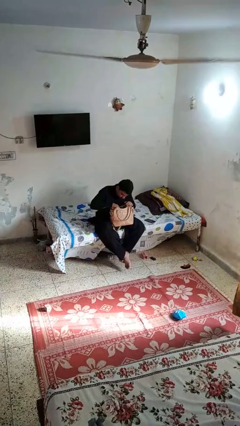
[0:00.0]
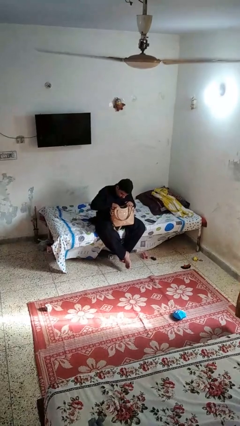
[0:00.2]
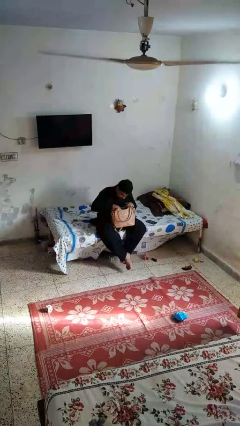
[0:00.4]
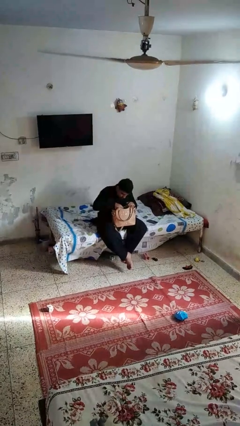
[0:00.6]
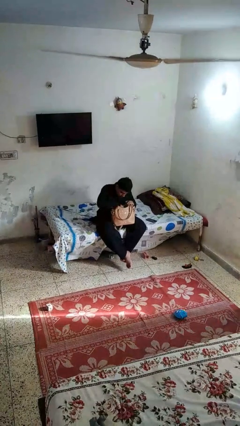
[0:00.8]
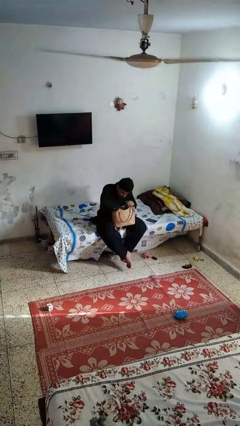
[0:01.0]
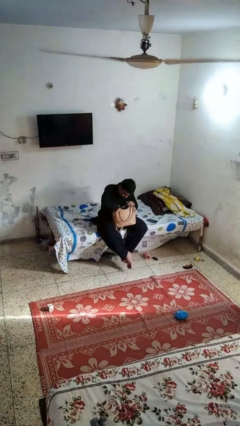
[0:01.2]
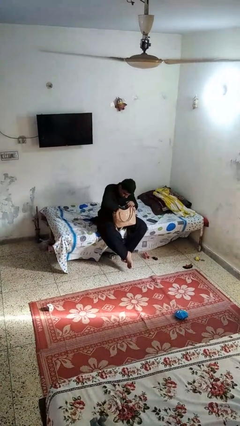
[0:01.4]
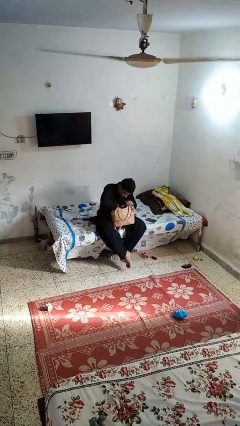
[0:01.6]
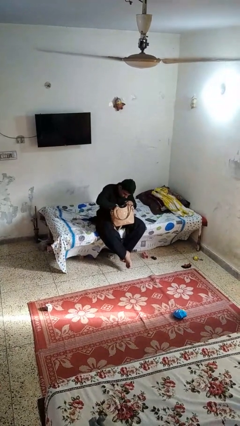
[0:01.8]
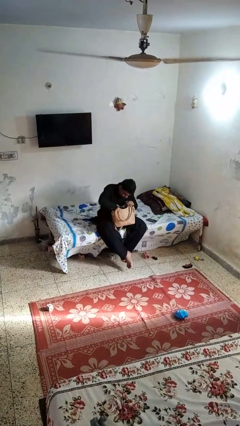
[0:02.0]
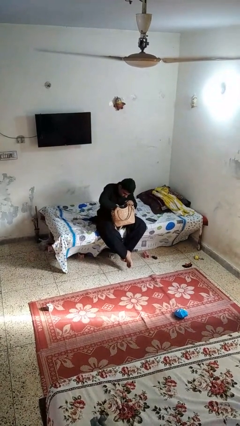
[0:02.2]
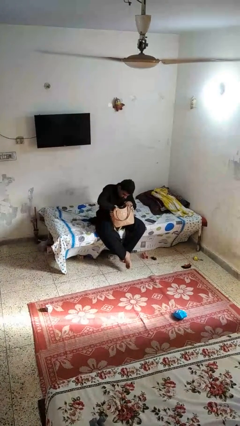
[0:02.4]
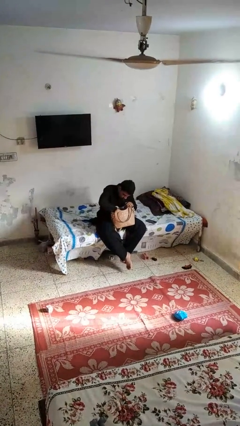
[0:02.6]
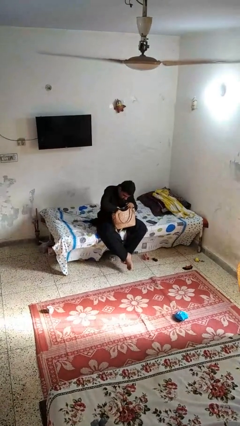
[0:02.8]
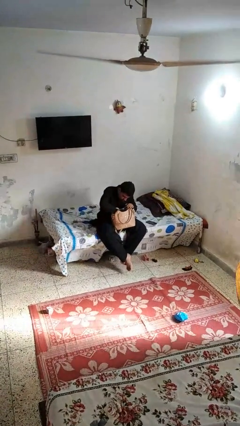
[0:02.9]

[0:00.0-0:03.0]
person searches in purse

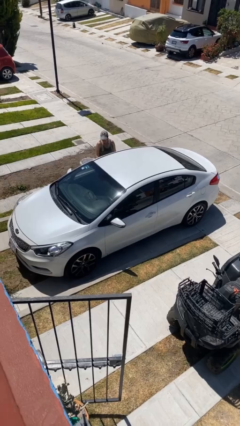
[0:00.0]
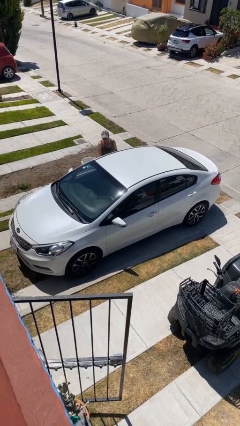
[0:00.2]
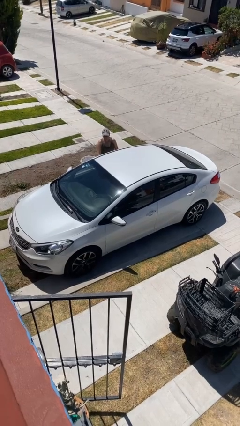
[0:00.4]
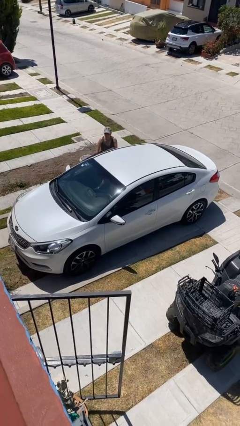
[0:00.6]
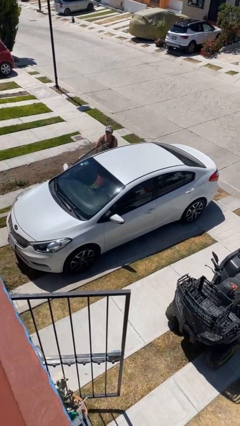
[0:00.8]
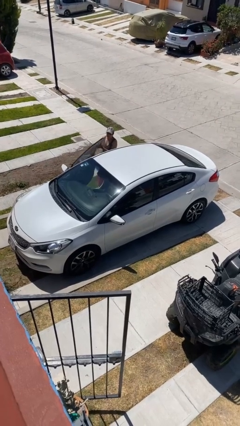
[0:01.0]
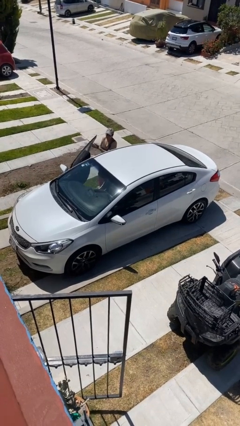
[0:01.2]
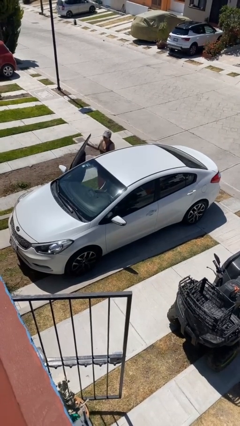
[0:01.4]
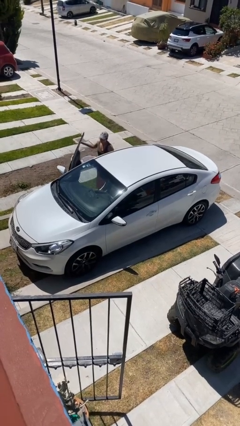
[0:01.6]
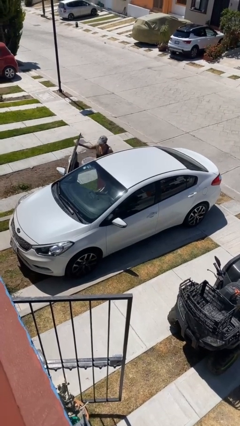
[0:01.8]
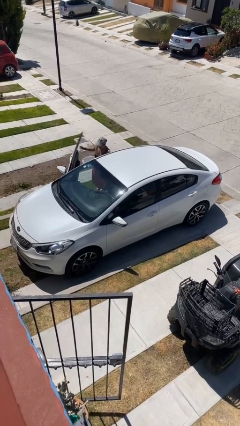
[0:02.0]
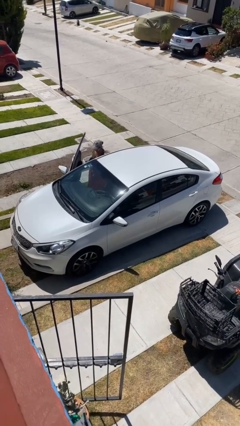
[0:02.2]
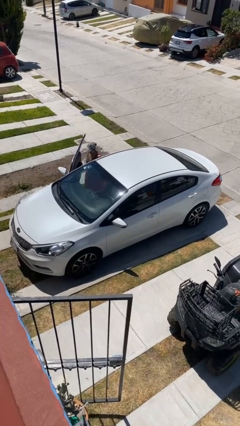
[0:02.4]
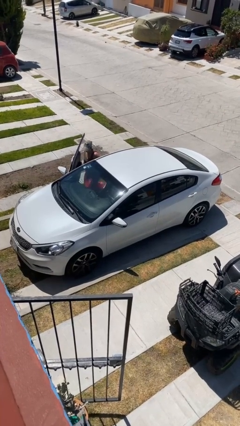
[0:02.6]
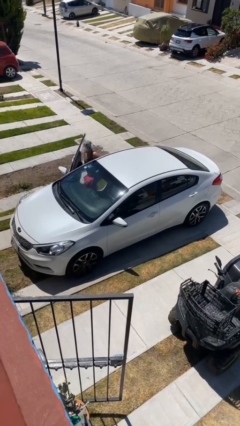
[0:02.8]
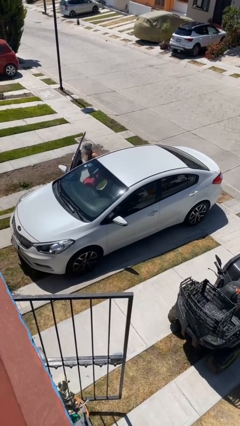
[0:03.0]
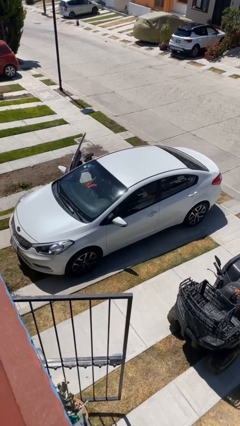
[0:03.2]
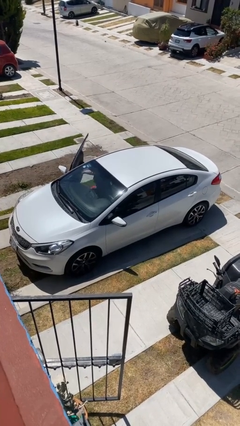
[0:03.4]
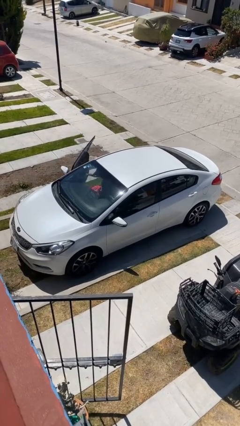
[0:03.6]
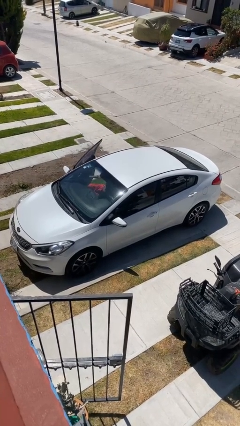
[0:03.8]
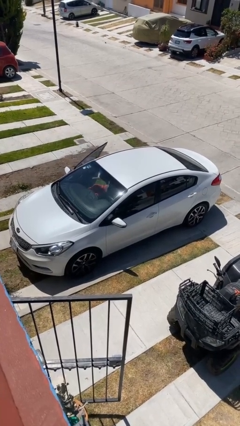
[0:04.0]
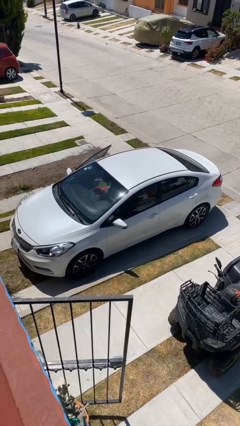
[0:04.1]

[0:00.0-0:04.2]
car picks up person

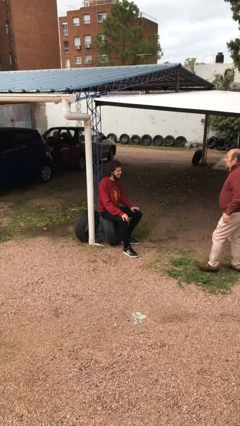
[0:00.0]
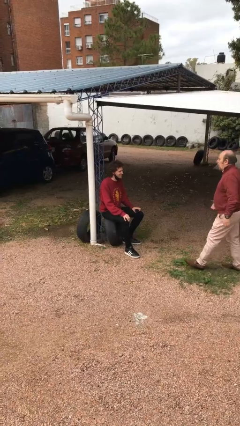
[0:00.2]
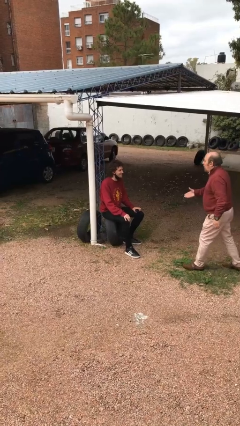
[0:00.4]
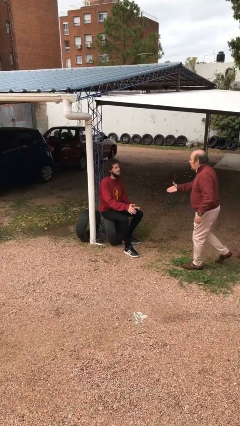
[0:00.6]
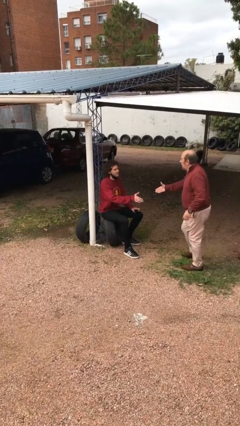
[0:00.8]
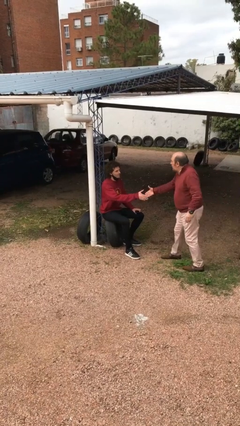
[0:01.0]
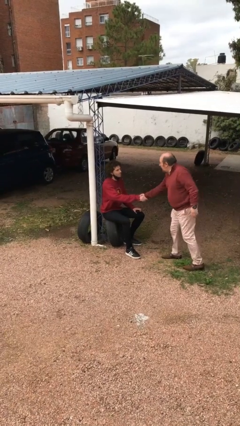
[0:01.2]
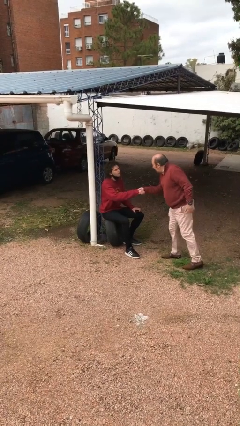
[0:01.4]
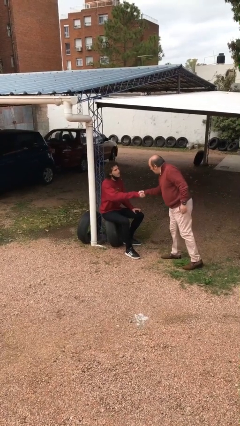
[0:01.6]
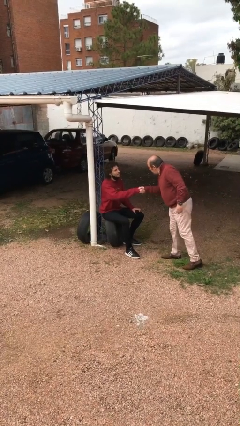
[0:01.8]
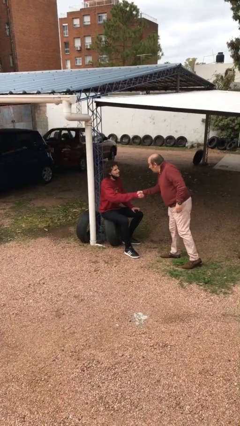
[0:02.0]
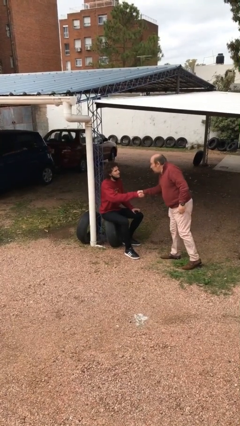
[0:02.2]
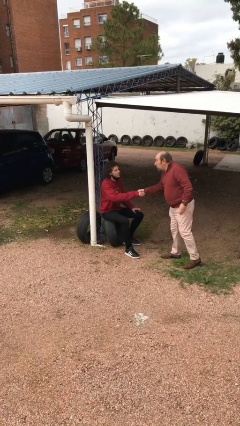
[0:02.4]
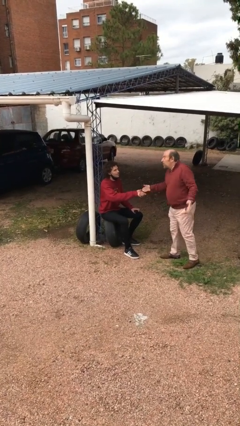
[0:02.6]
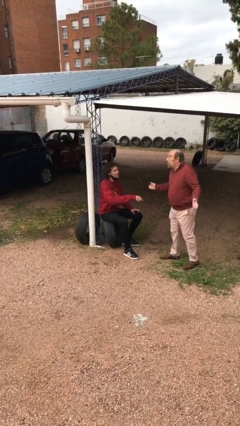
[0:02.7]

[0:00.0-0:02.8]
person shakes hand

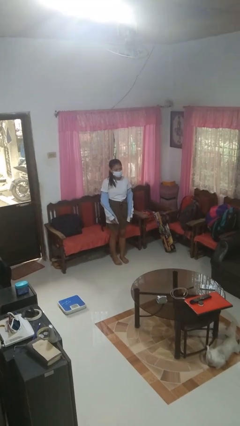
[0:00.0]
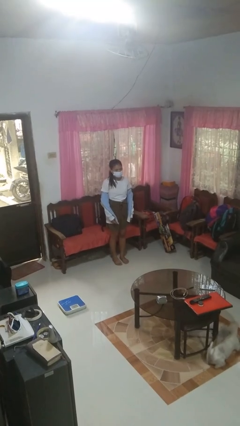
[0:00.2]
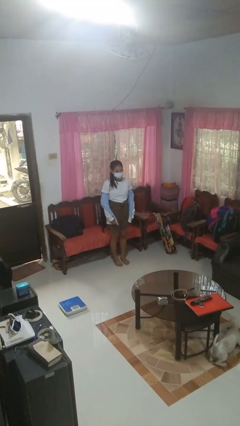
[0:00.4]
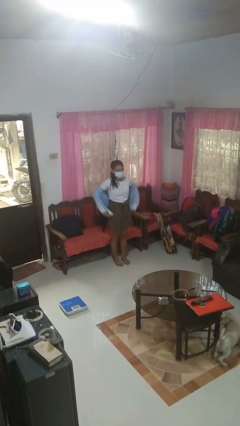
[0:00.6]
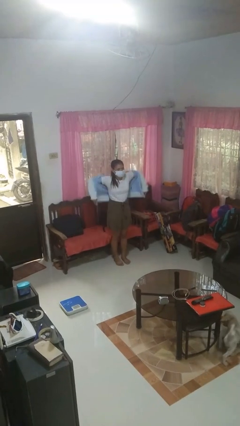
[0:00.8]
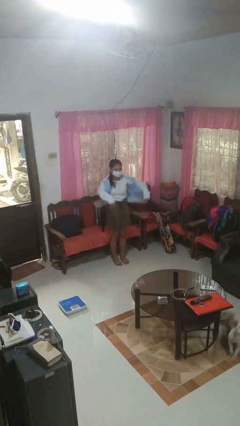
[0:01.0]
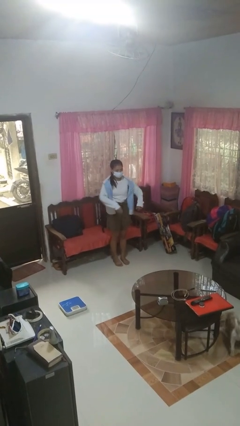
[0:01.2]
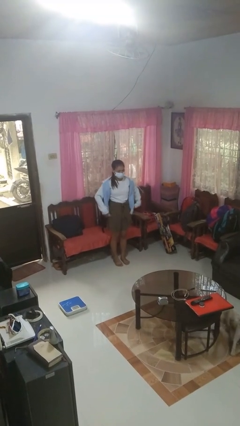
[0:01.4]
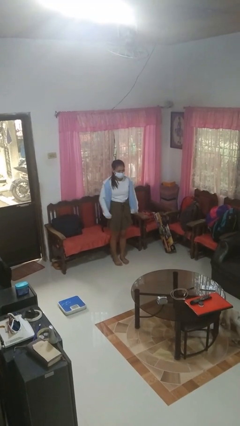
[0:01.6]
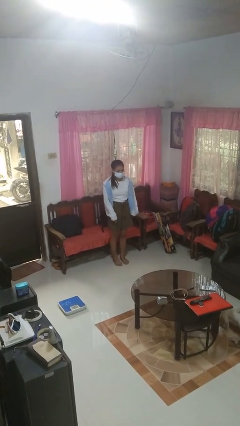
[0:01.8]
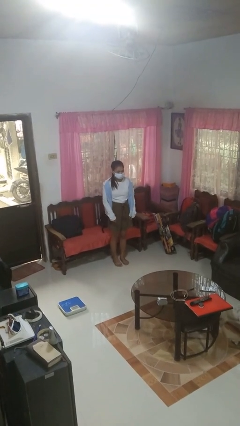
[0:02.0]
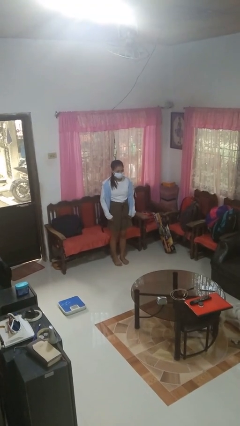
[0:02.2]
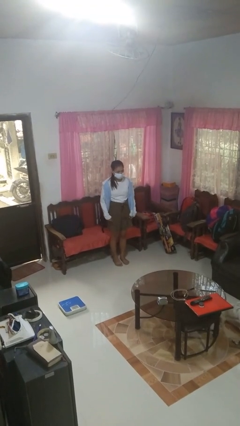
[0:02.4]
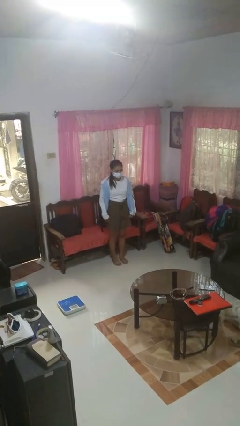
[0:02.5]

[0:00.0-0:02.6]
person puts on jacket

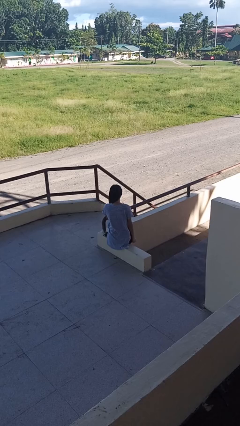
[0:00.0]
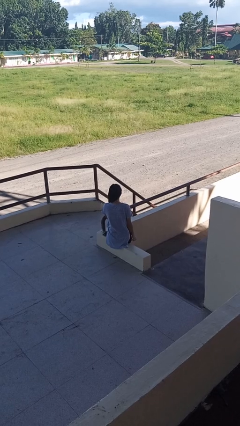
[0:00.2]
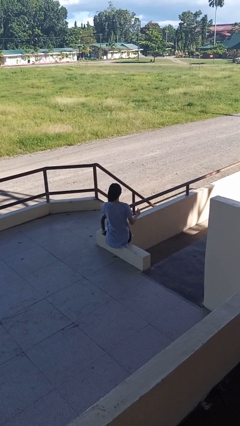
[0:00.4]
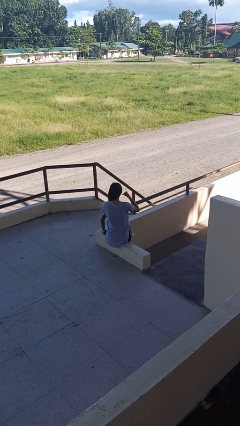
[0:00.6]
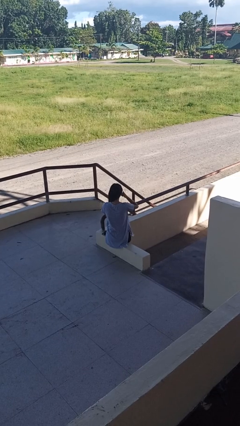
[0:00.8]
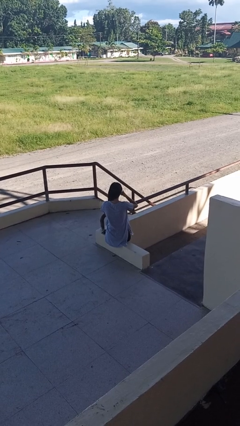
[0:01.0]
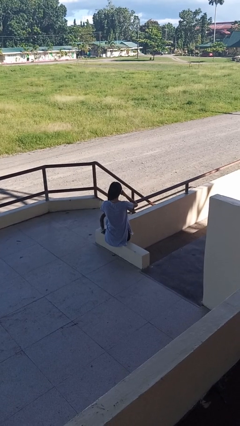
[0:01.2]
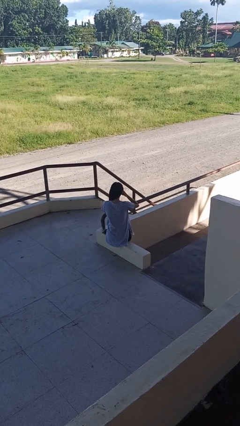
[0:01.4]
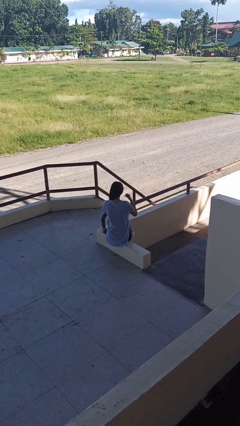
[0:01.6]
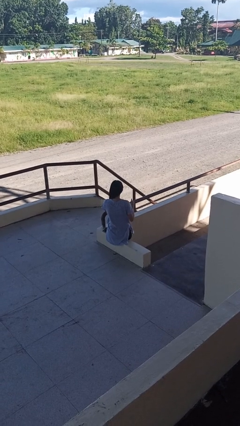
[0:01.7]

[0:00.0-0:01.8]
person gestures call me

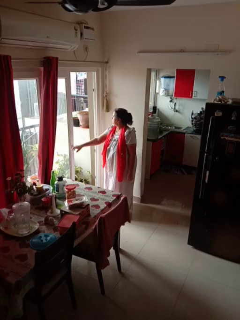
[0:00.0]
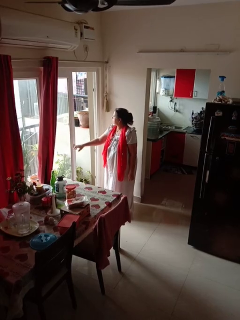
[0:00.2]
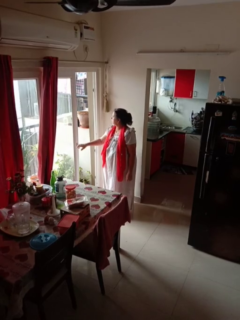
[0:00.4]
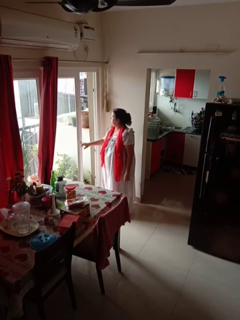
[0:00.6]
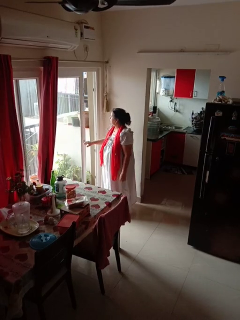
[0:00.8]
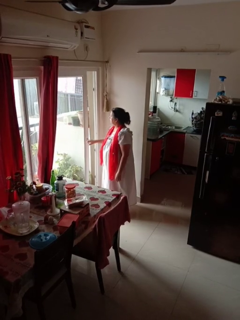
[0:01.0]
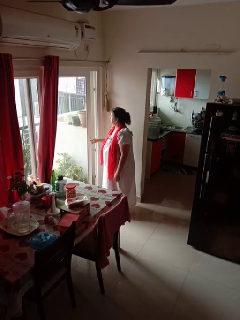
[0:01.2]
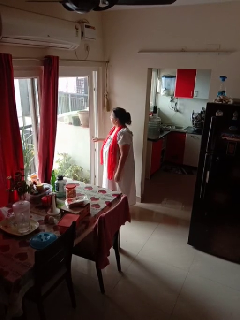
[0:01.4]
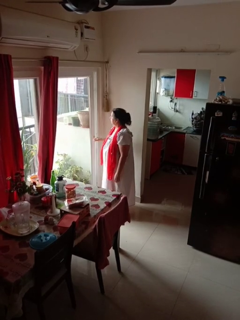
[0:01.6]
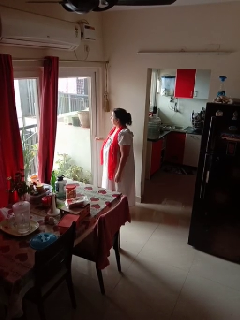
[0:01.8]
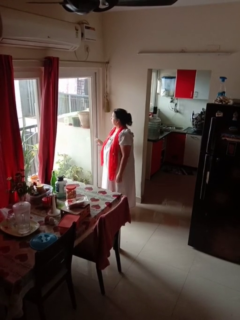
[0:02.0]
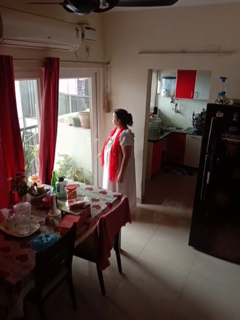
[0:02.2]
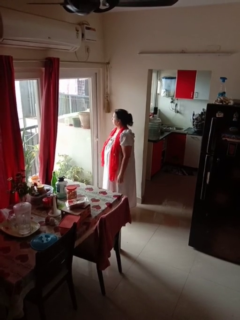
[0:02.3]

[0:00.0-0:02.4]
person closes sliding door

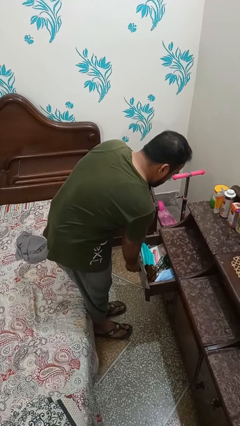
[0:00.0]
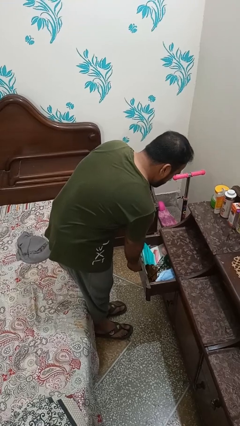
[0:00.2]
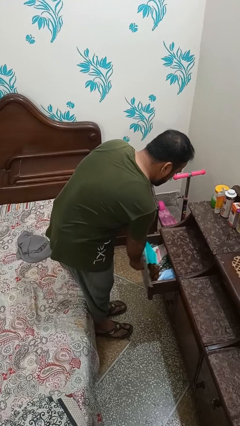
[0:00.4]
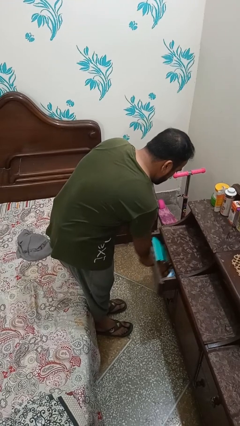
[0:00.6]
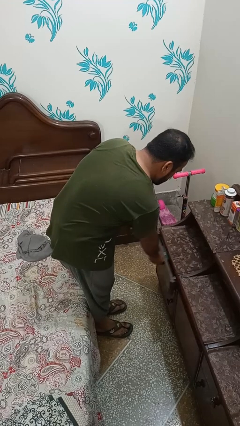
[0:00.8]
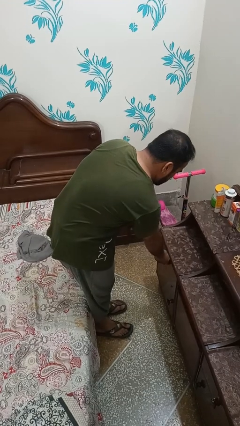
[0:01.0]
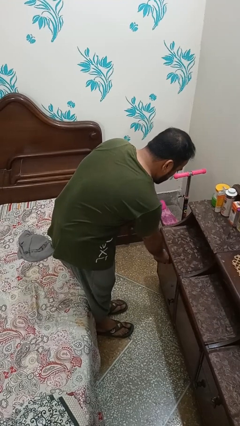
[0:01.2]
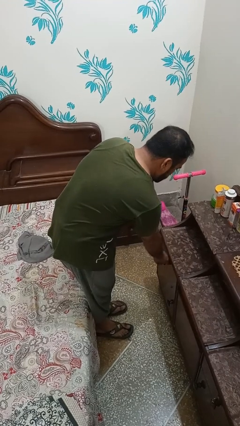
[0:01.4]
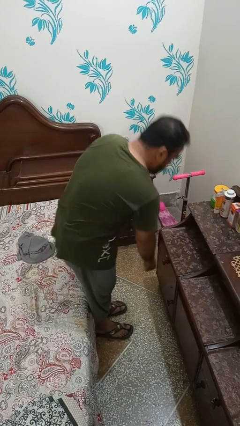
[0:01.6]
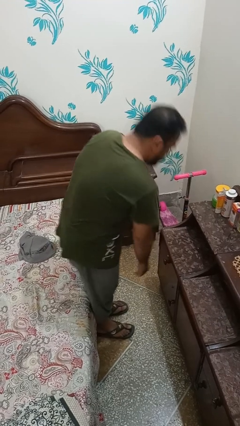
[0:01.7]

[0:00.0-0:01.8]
person closes dresser drawer
